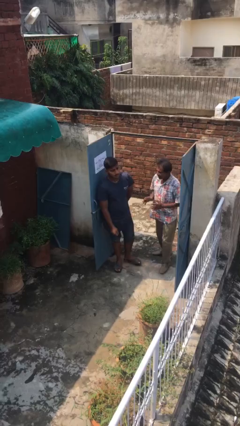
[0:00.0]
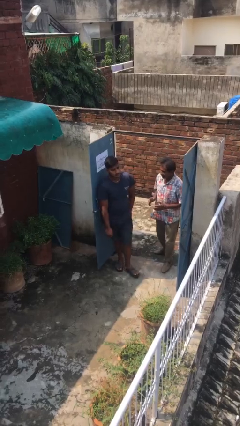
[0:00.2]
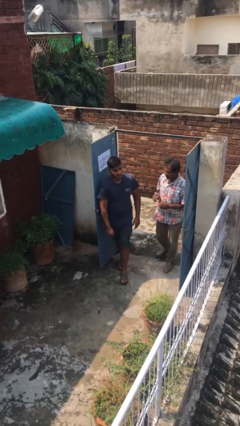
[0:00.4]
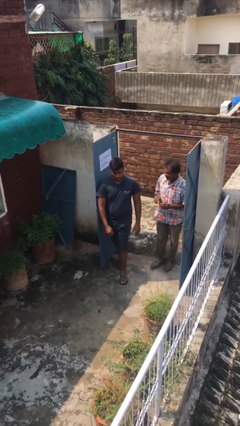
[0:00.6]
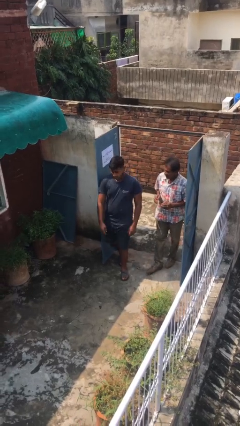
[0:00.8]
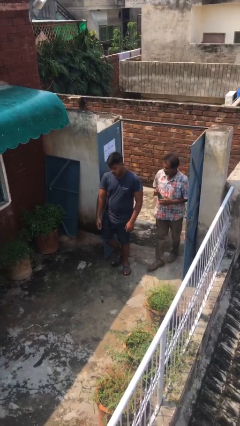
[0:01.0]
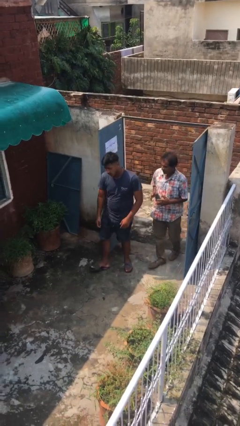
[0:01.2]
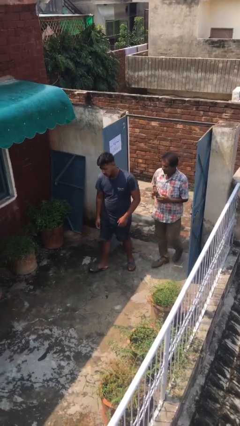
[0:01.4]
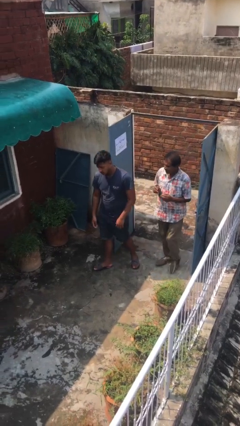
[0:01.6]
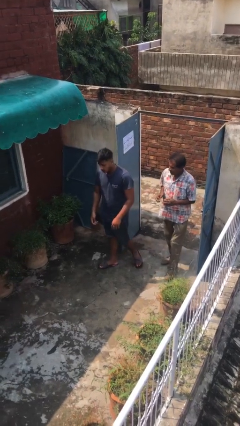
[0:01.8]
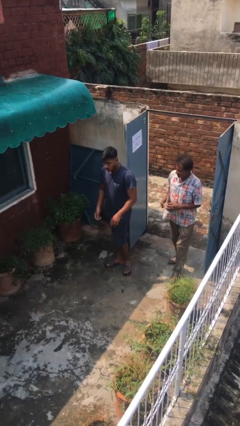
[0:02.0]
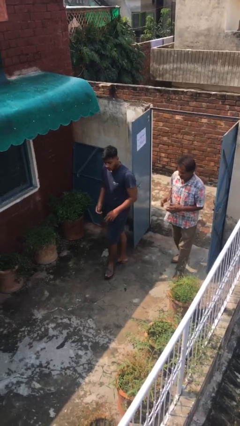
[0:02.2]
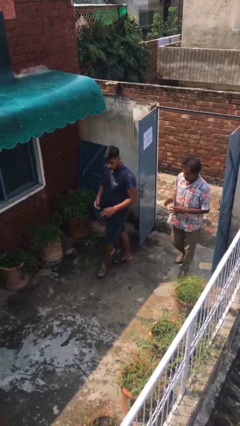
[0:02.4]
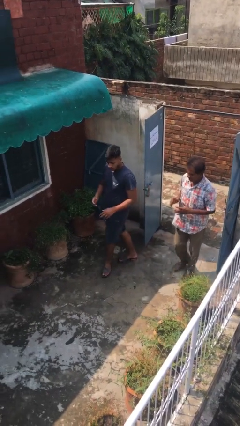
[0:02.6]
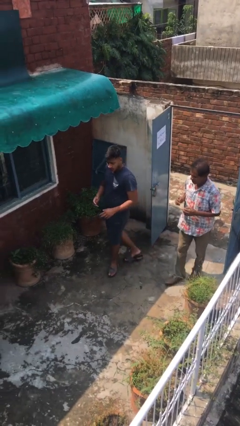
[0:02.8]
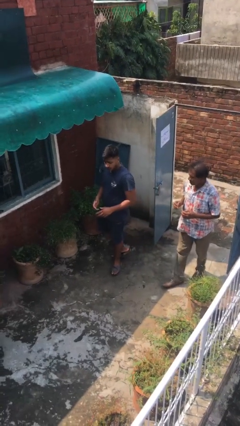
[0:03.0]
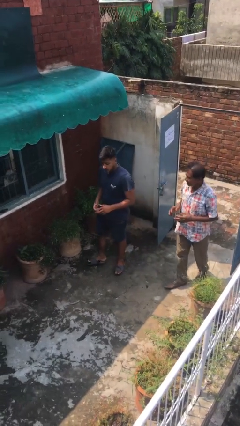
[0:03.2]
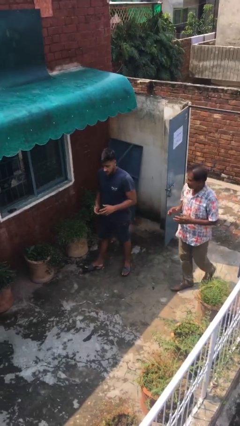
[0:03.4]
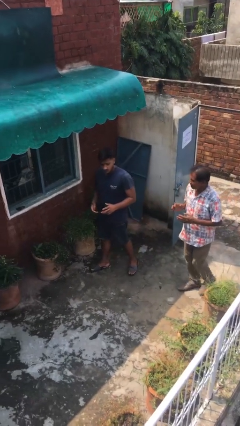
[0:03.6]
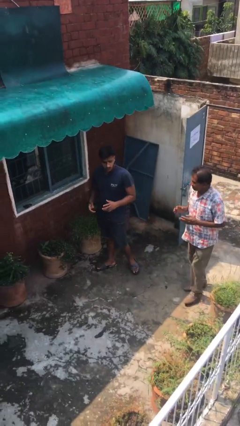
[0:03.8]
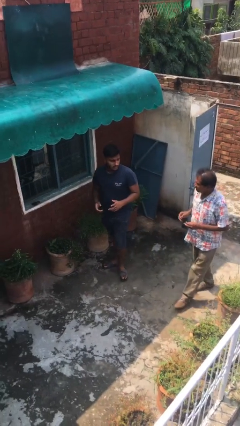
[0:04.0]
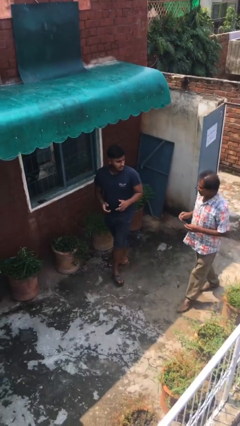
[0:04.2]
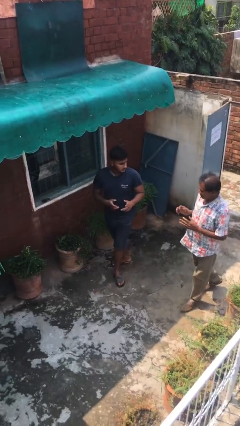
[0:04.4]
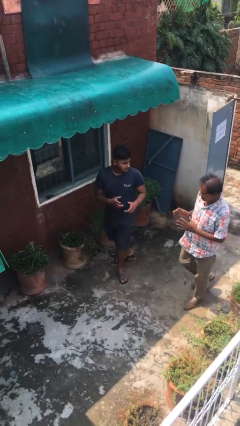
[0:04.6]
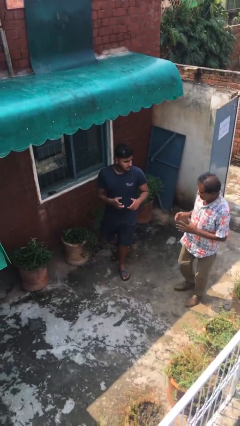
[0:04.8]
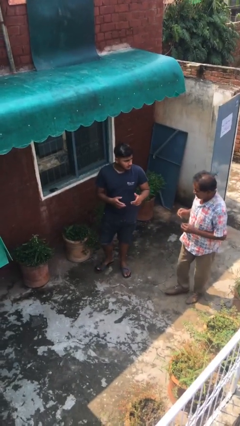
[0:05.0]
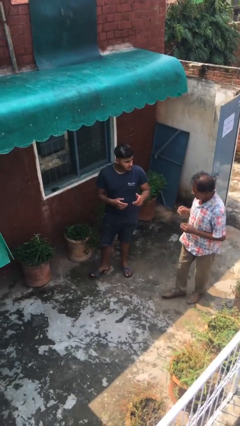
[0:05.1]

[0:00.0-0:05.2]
person talks to person

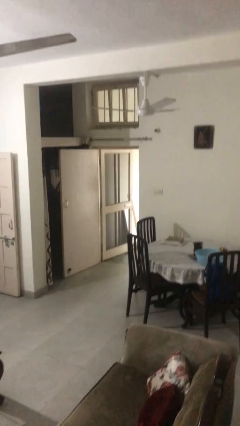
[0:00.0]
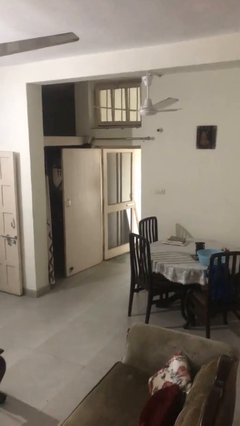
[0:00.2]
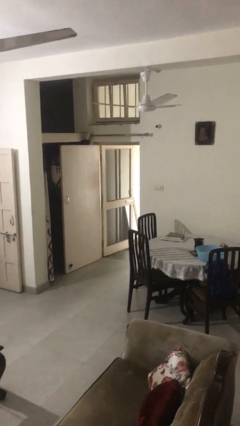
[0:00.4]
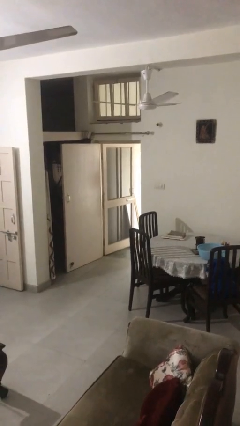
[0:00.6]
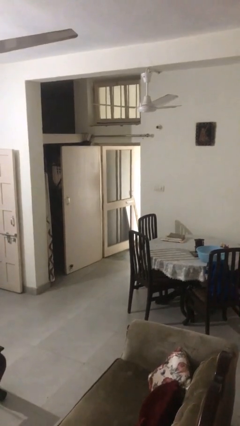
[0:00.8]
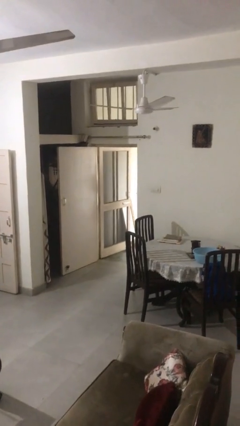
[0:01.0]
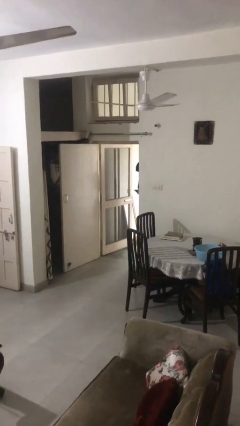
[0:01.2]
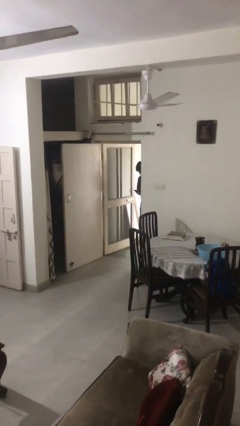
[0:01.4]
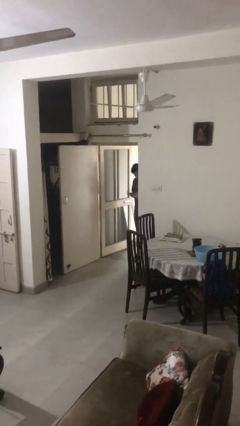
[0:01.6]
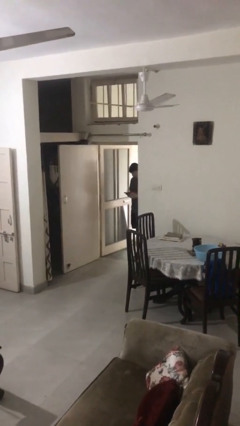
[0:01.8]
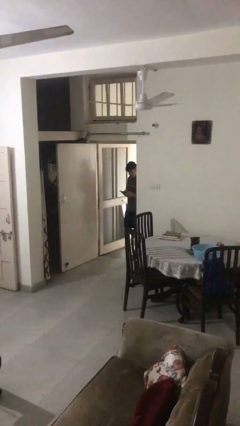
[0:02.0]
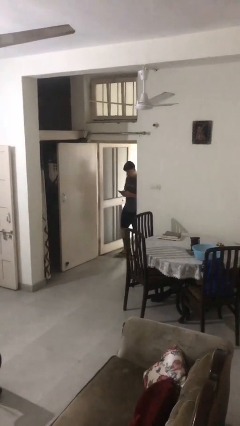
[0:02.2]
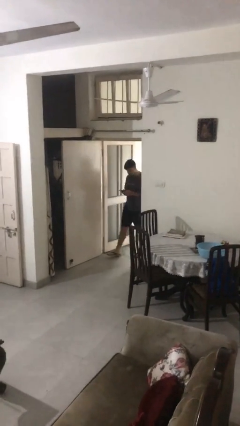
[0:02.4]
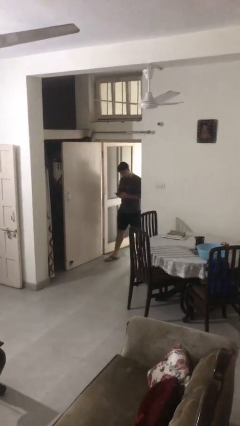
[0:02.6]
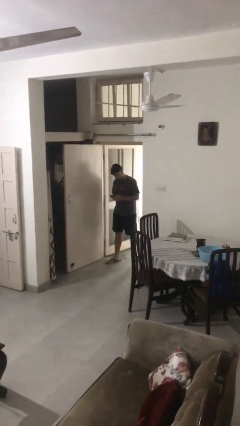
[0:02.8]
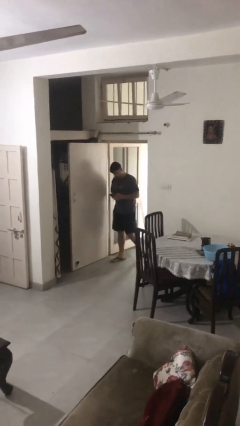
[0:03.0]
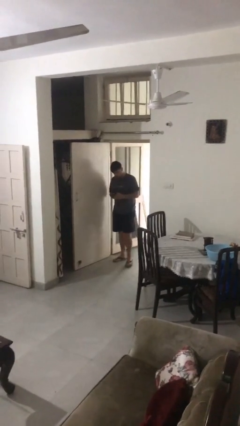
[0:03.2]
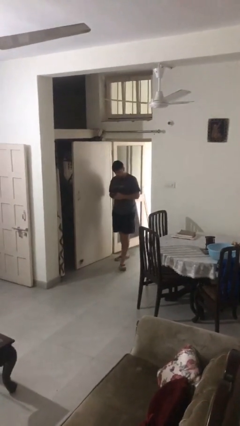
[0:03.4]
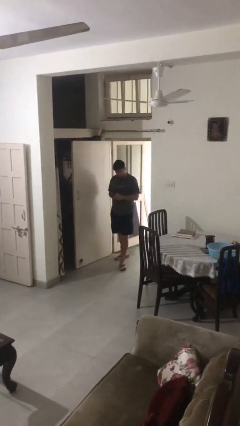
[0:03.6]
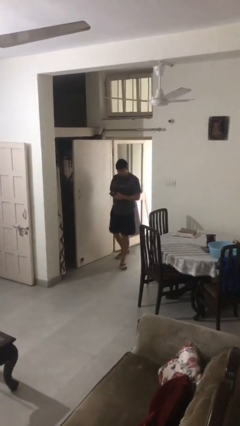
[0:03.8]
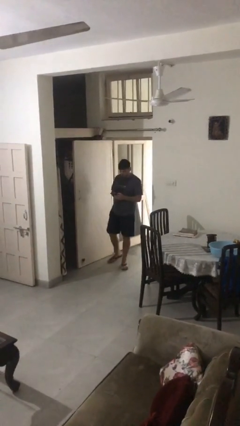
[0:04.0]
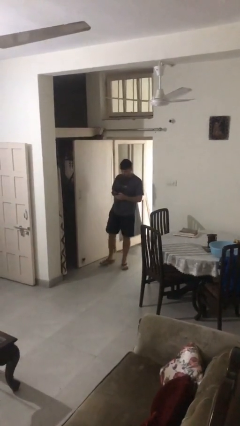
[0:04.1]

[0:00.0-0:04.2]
person enters scene through structure

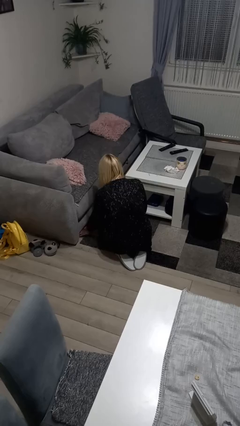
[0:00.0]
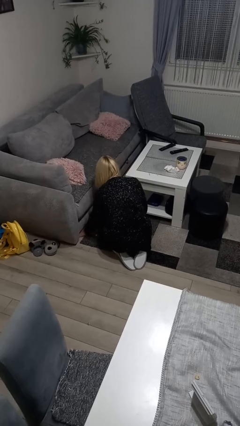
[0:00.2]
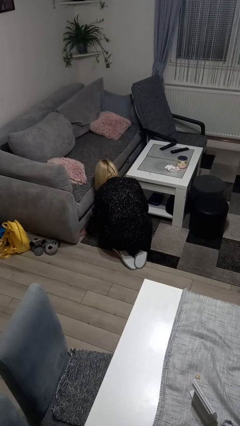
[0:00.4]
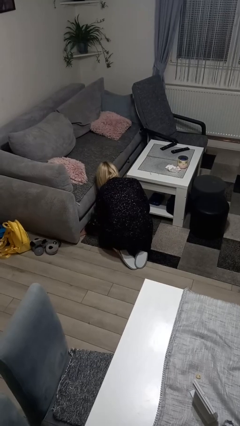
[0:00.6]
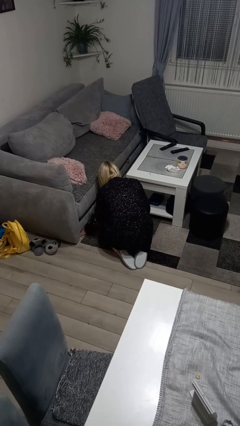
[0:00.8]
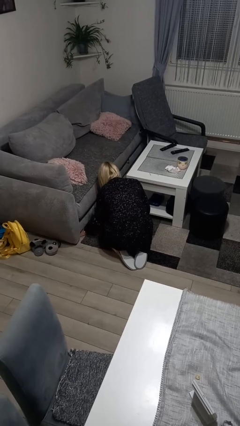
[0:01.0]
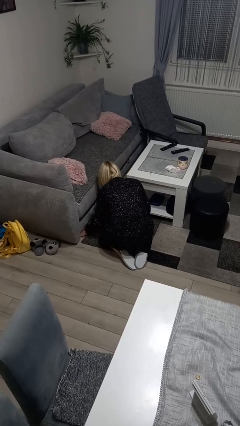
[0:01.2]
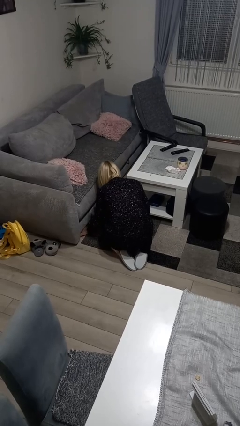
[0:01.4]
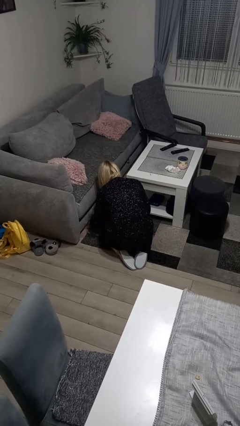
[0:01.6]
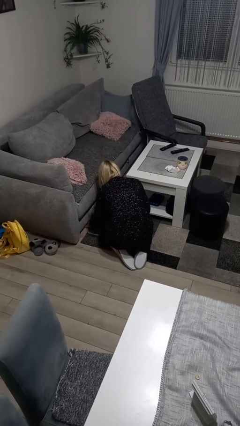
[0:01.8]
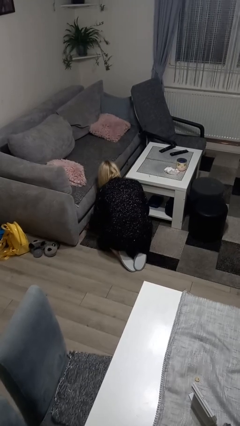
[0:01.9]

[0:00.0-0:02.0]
person searches under couch

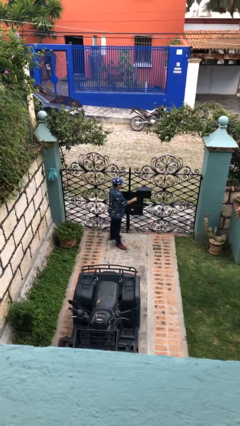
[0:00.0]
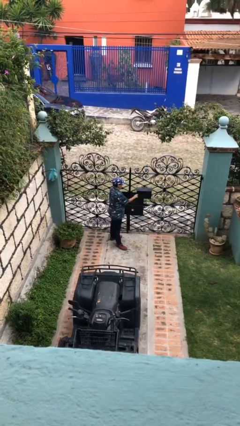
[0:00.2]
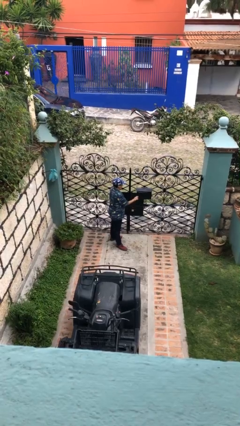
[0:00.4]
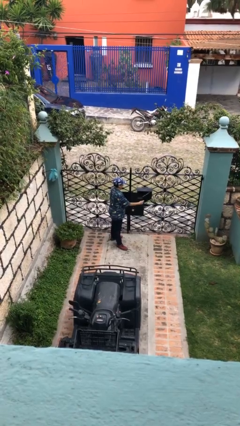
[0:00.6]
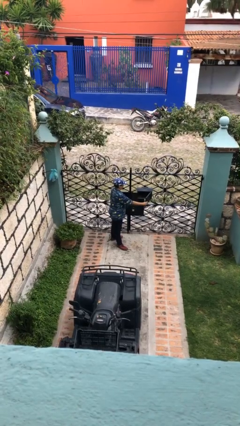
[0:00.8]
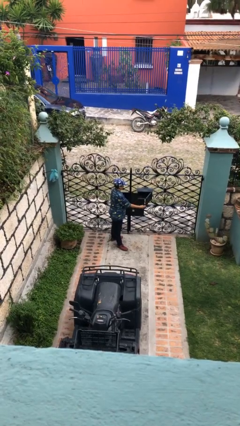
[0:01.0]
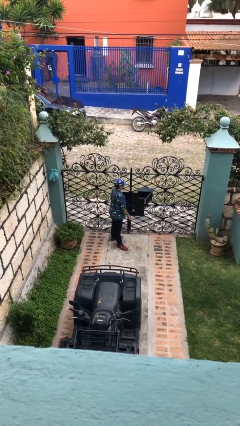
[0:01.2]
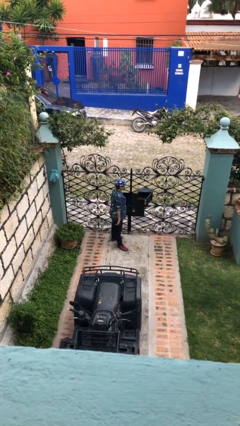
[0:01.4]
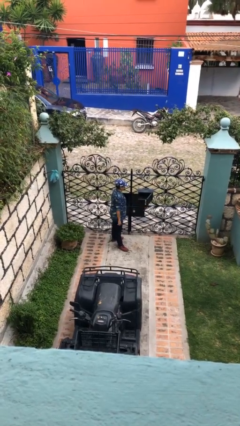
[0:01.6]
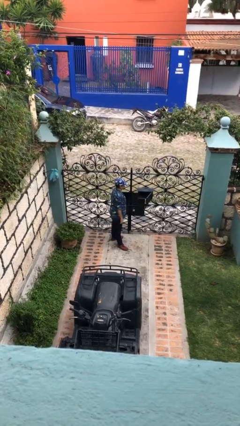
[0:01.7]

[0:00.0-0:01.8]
person opens mailbox

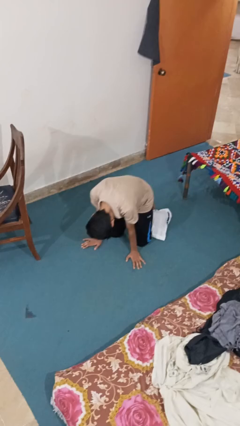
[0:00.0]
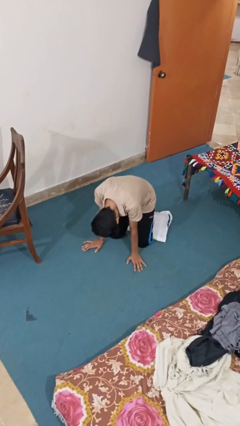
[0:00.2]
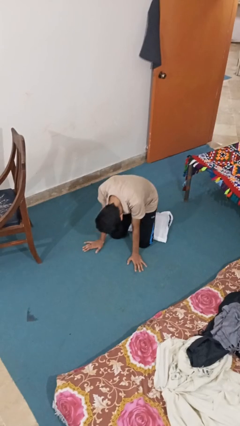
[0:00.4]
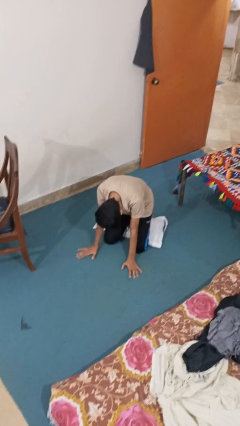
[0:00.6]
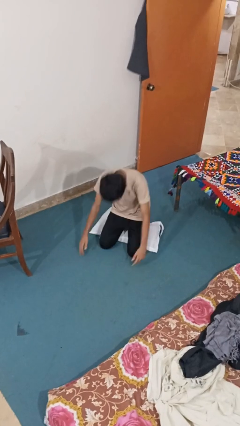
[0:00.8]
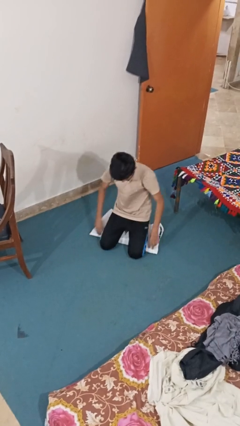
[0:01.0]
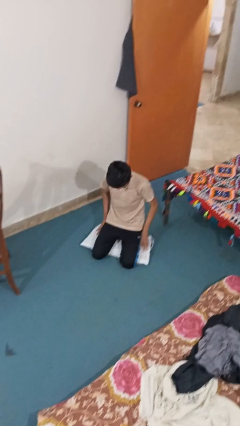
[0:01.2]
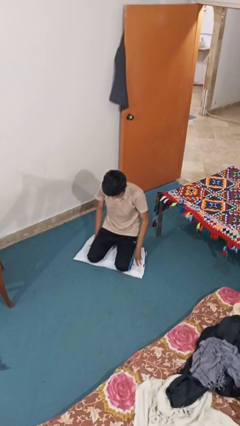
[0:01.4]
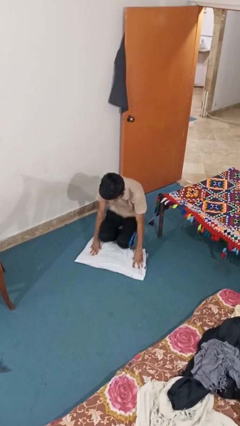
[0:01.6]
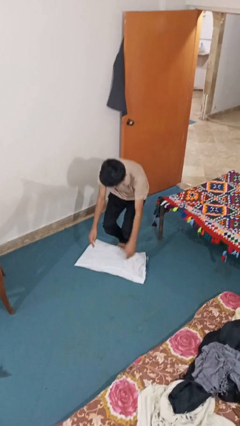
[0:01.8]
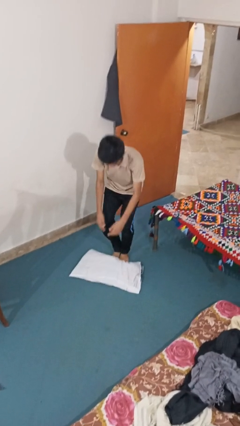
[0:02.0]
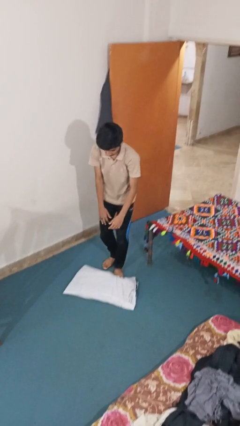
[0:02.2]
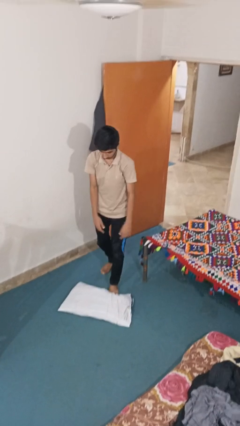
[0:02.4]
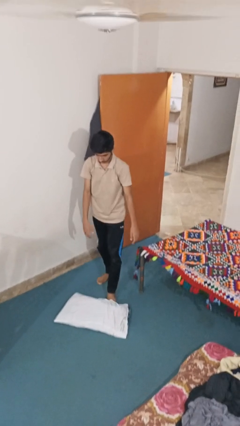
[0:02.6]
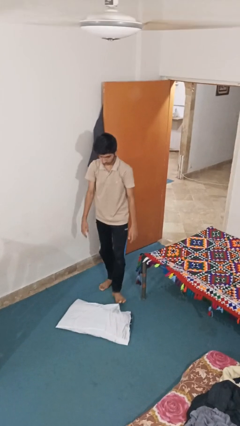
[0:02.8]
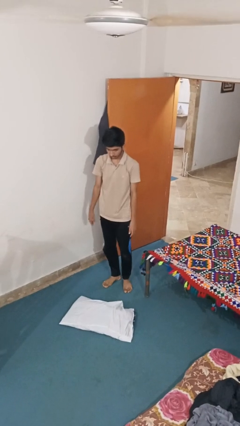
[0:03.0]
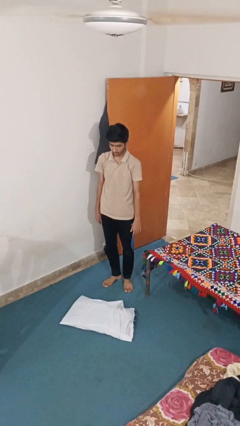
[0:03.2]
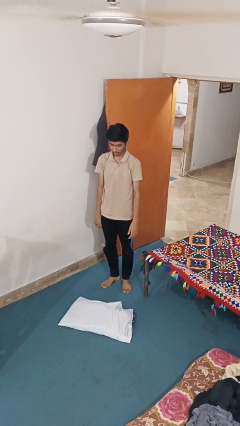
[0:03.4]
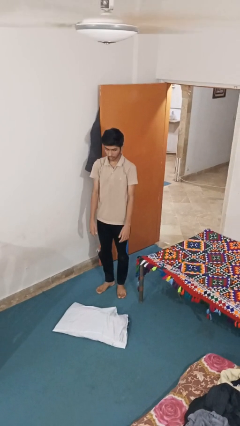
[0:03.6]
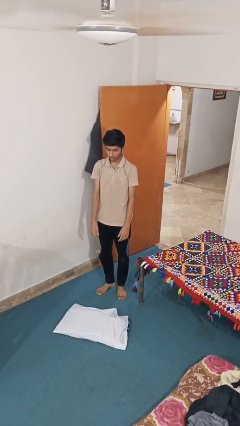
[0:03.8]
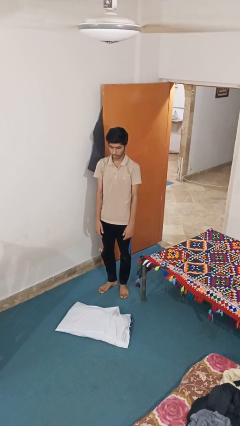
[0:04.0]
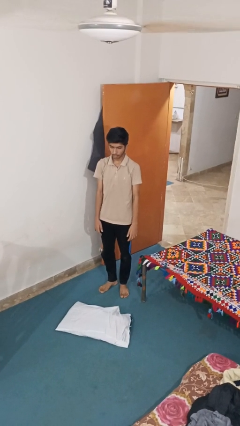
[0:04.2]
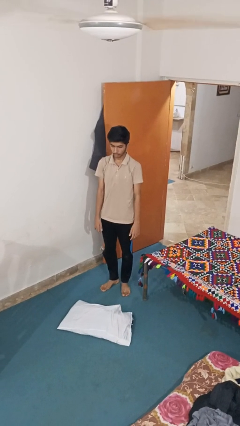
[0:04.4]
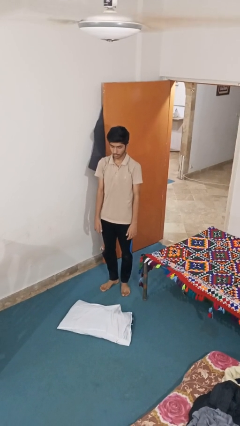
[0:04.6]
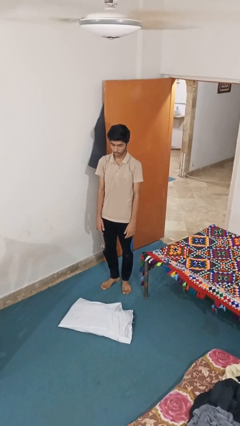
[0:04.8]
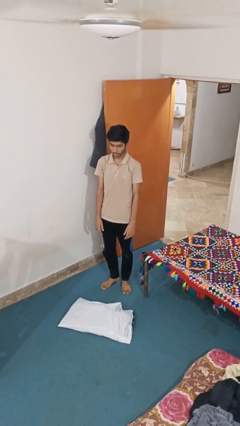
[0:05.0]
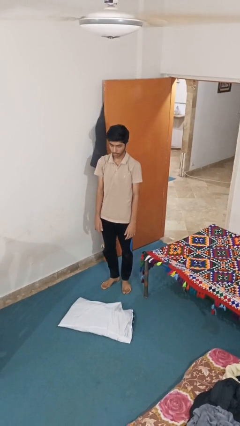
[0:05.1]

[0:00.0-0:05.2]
person stands up from floor
